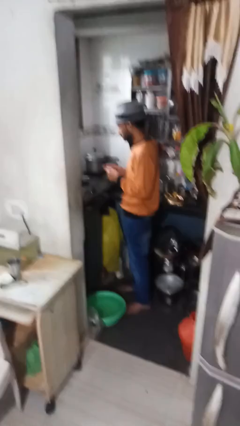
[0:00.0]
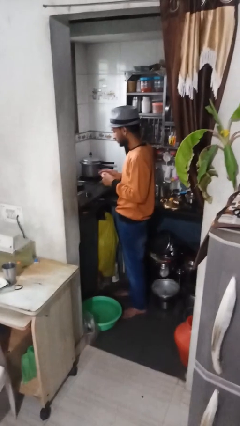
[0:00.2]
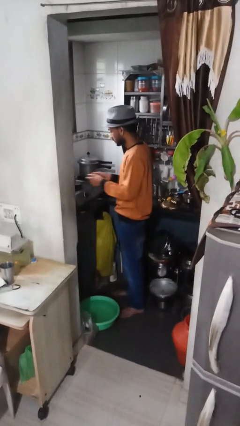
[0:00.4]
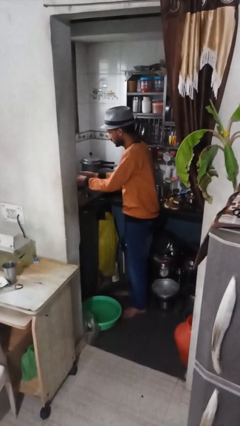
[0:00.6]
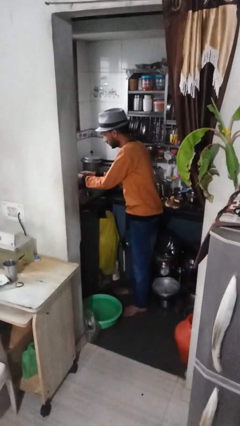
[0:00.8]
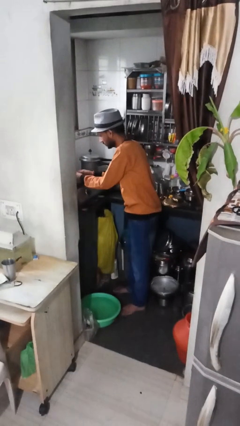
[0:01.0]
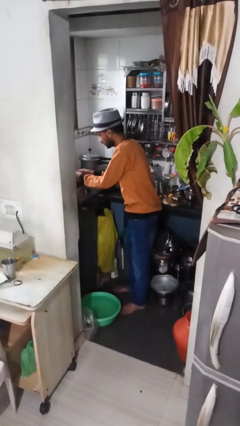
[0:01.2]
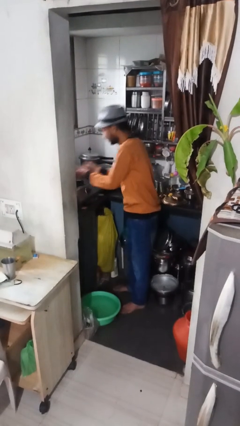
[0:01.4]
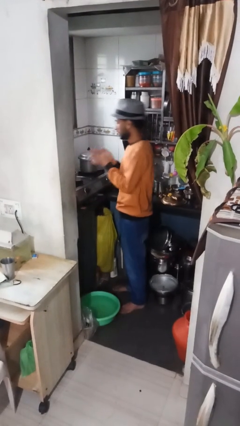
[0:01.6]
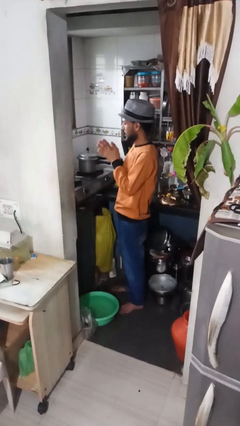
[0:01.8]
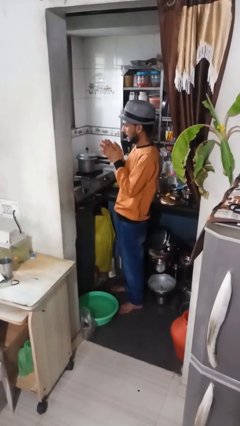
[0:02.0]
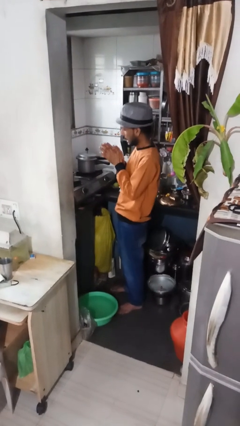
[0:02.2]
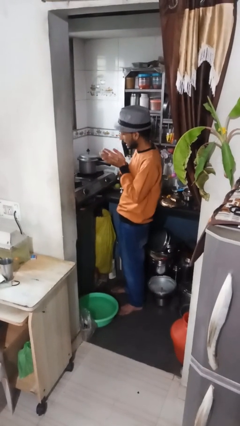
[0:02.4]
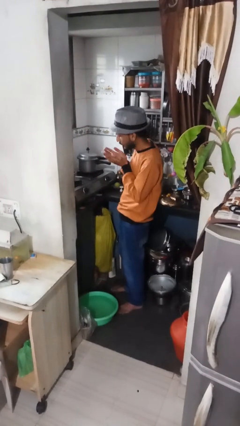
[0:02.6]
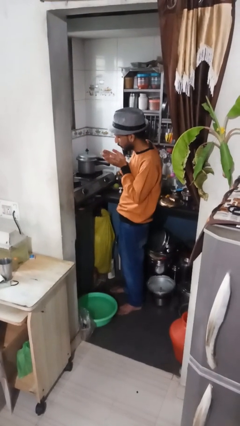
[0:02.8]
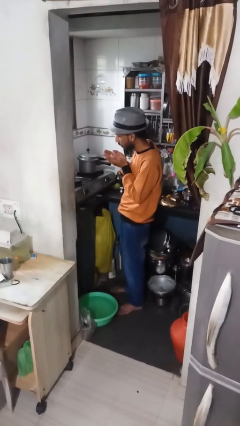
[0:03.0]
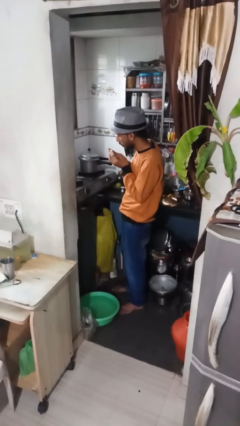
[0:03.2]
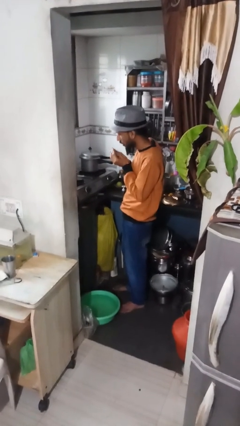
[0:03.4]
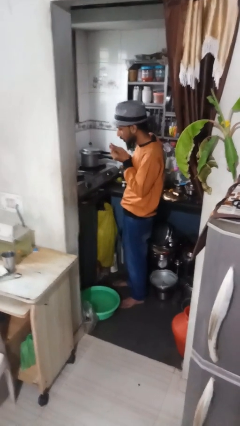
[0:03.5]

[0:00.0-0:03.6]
person burns hand

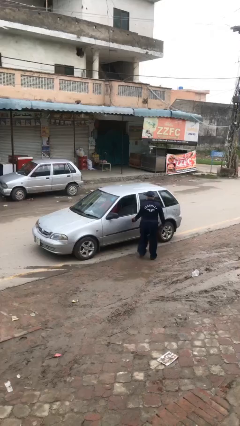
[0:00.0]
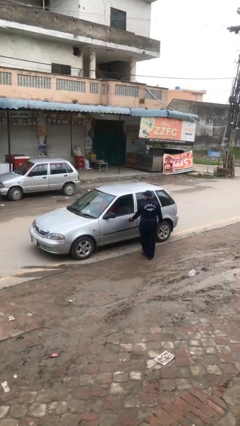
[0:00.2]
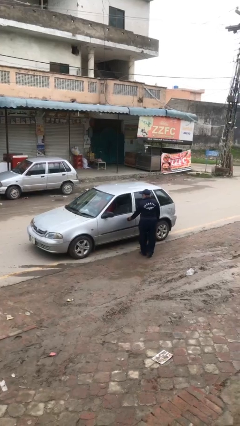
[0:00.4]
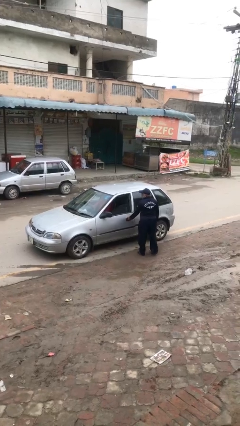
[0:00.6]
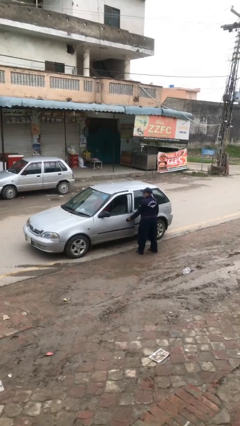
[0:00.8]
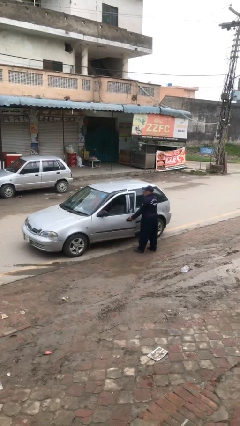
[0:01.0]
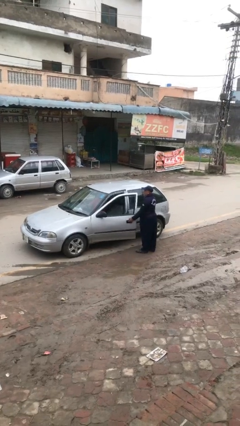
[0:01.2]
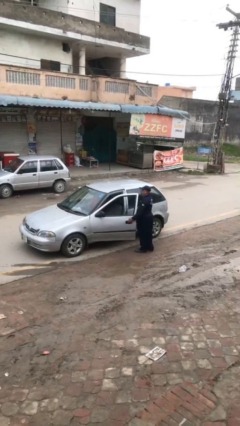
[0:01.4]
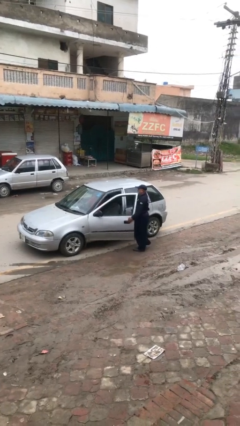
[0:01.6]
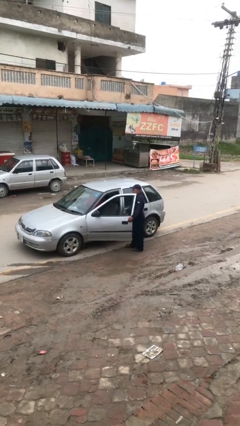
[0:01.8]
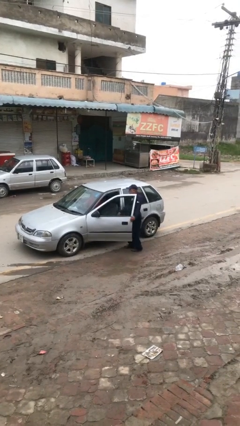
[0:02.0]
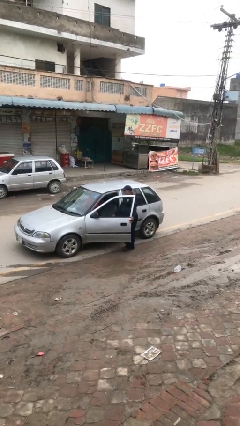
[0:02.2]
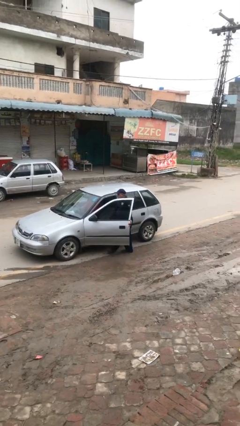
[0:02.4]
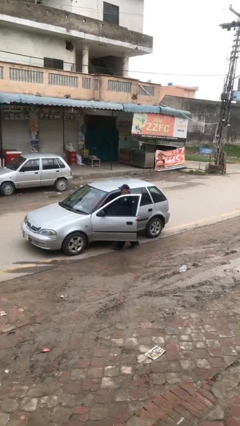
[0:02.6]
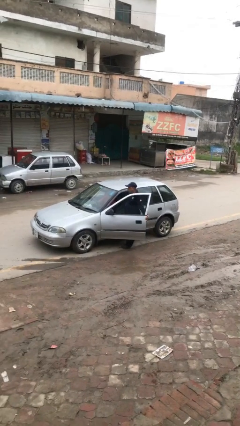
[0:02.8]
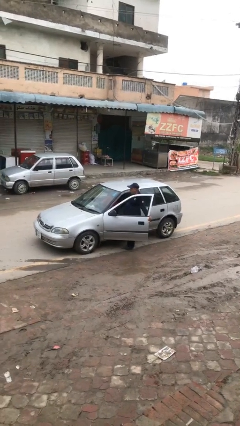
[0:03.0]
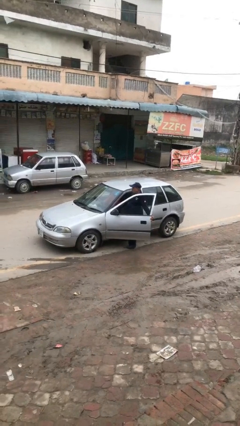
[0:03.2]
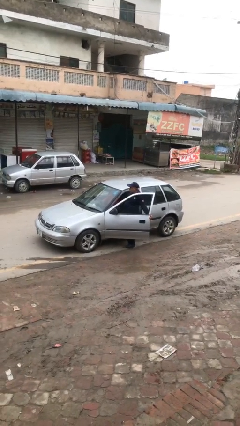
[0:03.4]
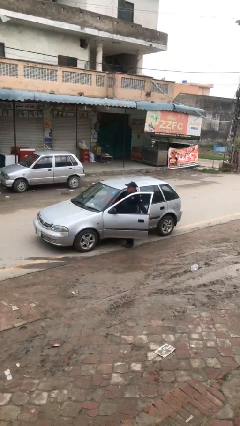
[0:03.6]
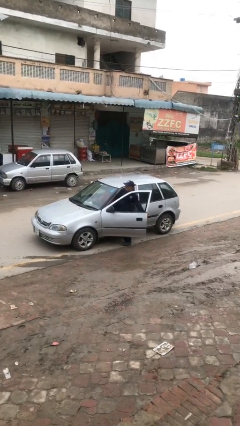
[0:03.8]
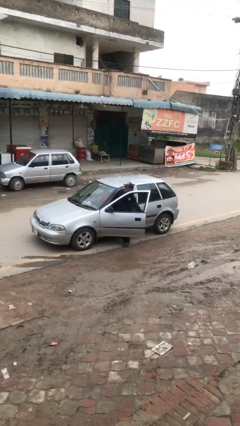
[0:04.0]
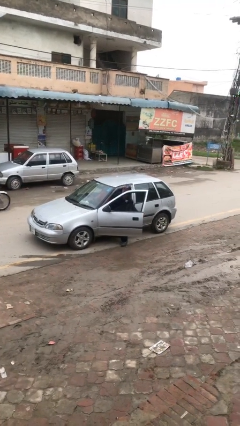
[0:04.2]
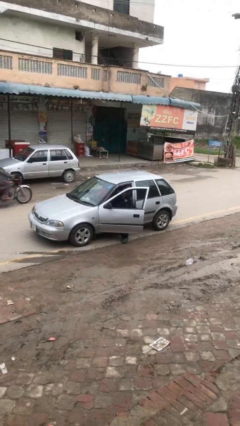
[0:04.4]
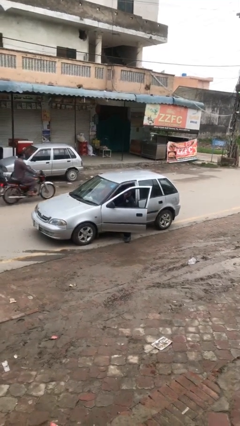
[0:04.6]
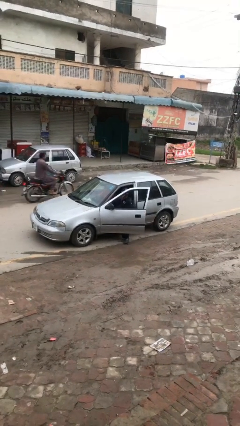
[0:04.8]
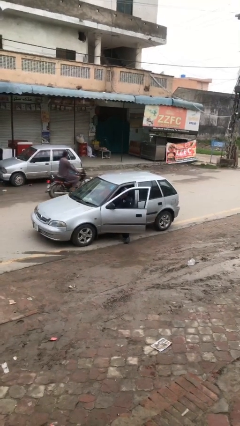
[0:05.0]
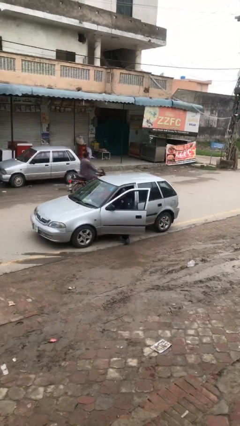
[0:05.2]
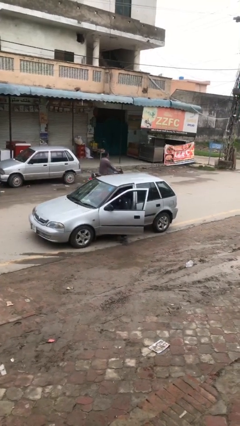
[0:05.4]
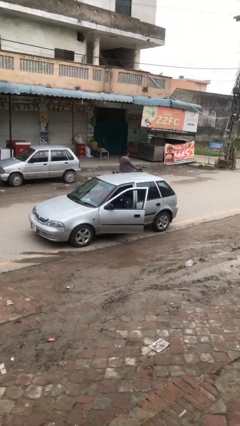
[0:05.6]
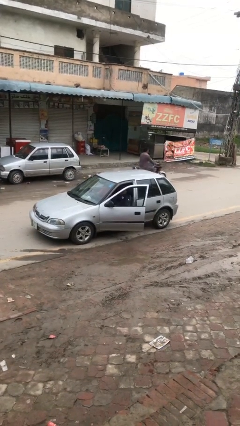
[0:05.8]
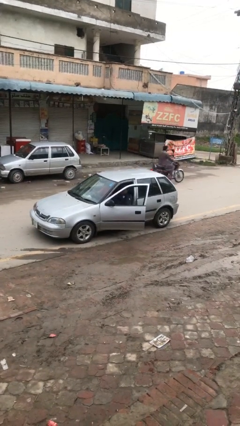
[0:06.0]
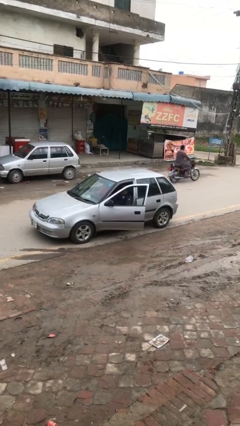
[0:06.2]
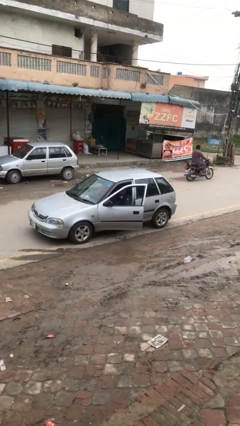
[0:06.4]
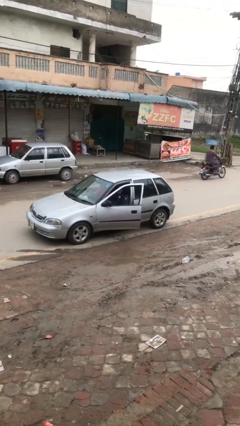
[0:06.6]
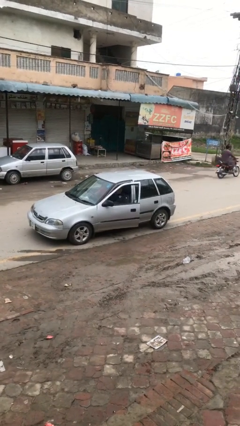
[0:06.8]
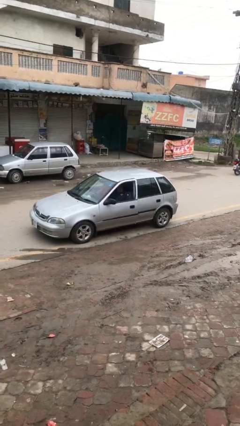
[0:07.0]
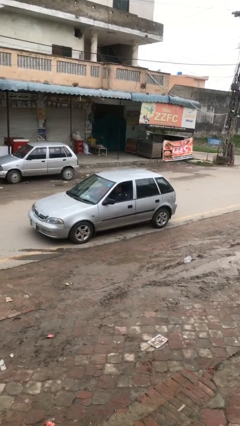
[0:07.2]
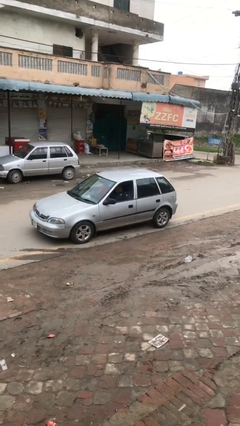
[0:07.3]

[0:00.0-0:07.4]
car picks up person

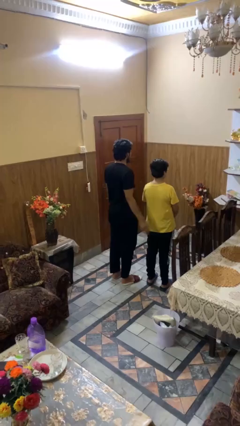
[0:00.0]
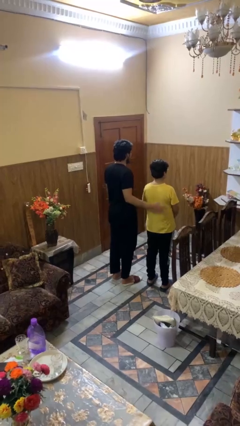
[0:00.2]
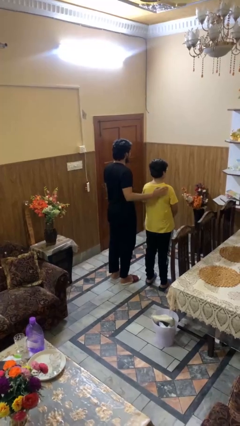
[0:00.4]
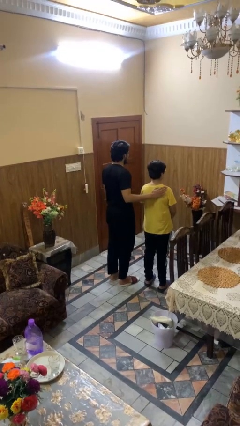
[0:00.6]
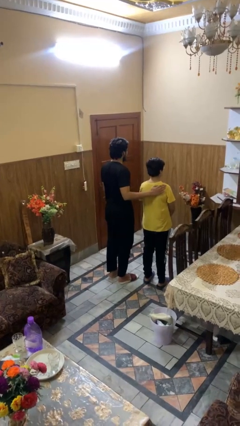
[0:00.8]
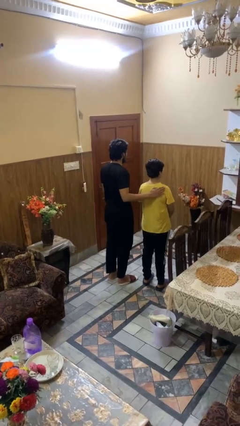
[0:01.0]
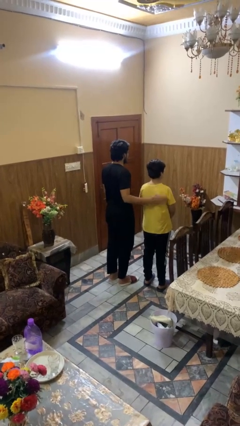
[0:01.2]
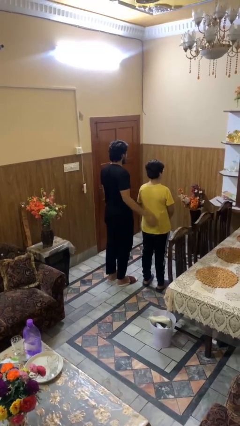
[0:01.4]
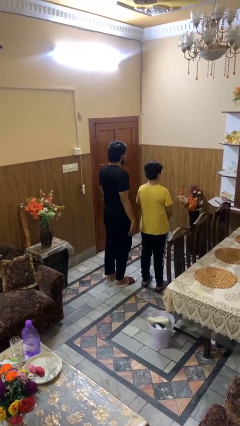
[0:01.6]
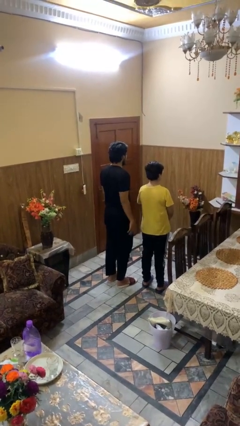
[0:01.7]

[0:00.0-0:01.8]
person touches back of person

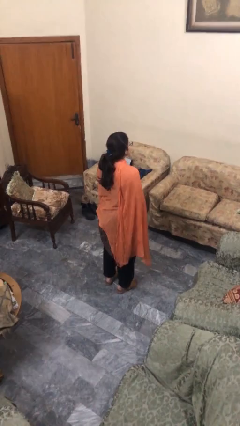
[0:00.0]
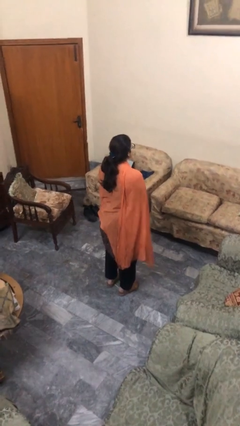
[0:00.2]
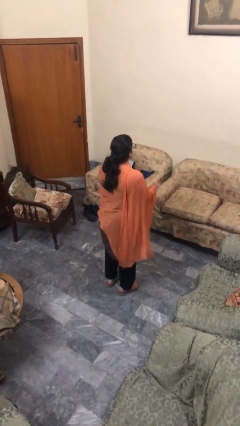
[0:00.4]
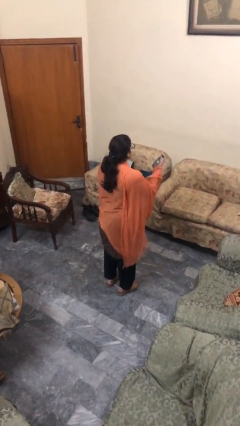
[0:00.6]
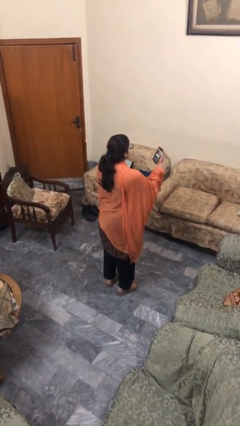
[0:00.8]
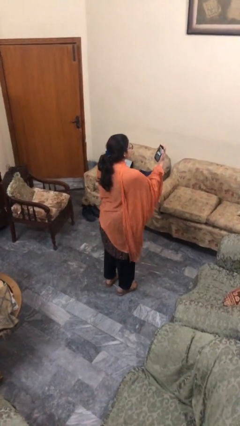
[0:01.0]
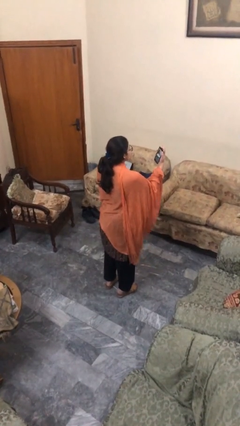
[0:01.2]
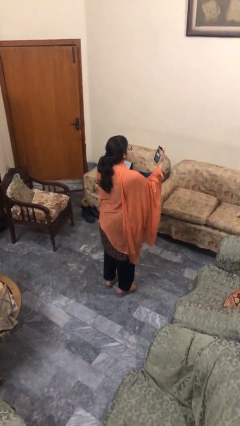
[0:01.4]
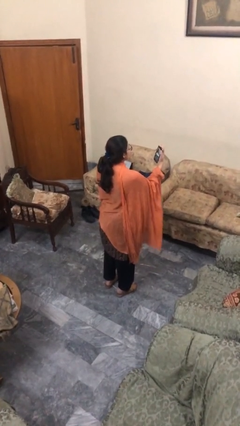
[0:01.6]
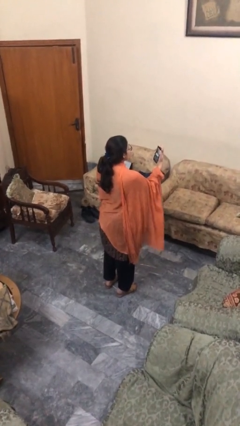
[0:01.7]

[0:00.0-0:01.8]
person takes phone from pocket

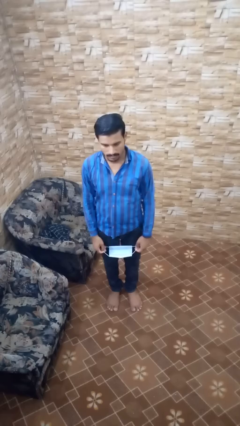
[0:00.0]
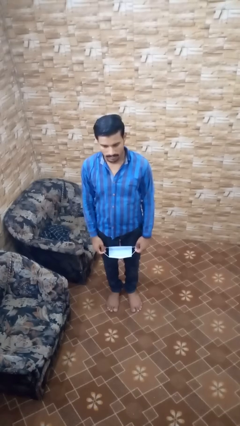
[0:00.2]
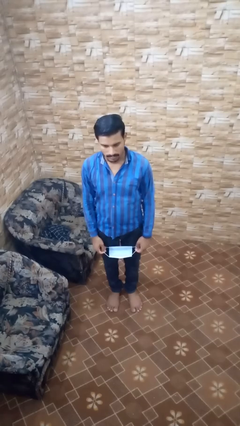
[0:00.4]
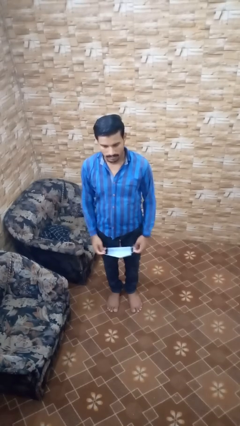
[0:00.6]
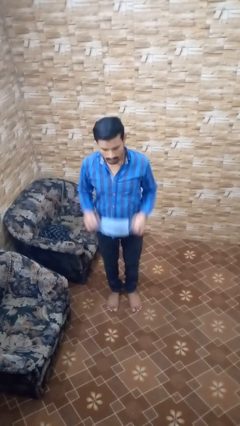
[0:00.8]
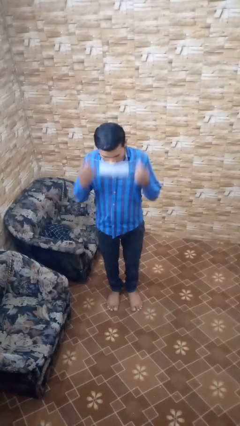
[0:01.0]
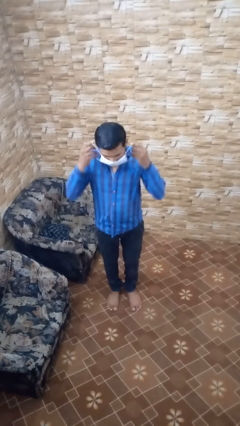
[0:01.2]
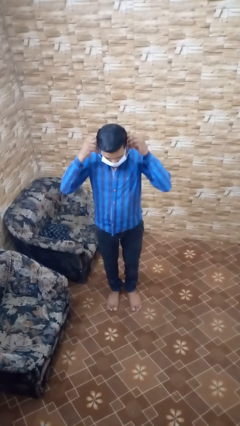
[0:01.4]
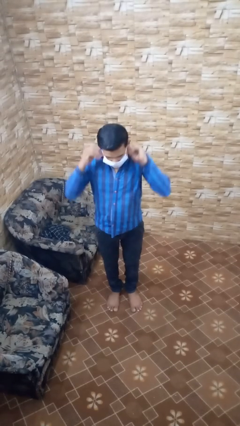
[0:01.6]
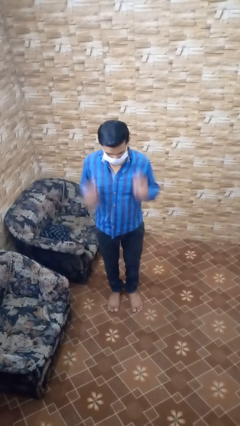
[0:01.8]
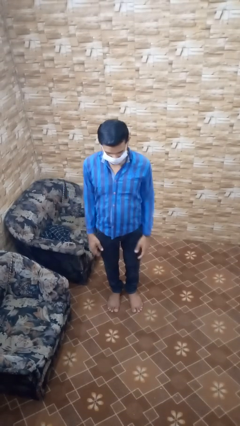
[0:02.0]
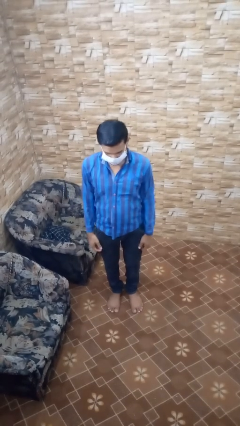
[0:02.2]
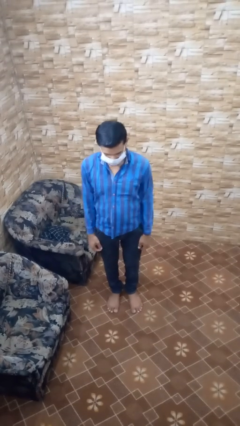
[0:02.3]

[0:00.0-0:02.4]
person puts on facemask

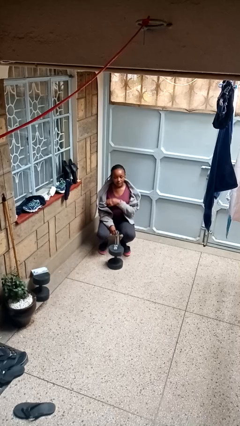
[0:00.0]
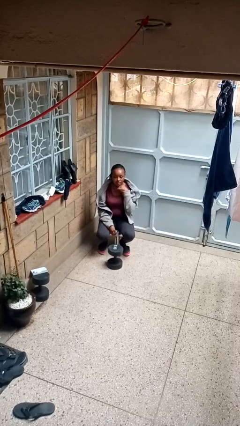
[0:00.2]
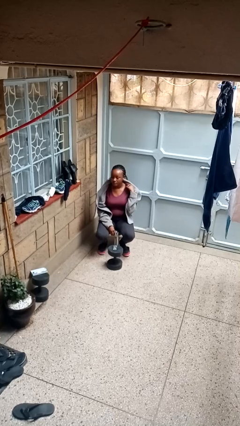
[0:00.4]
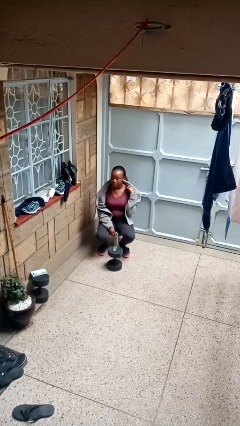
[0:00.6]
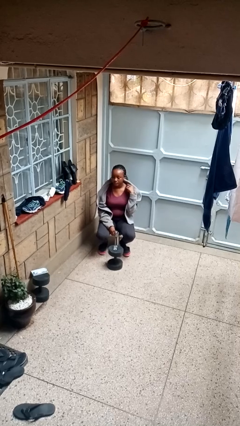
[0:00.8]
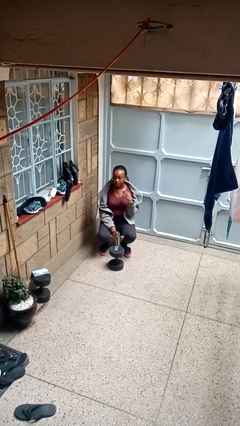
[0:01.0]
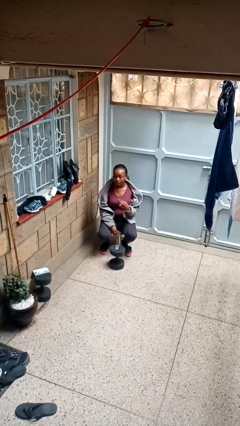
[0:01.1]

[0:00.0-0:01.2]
person gestures cut
